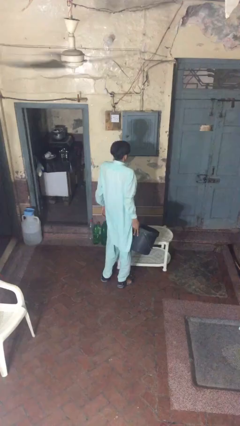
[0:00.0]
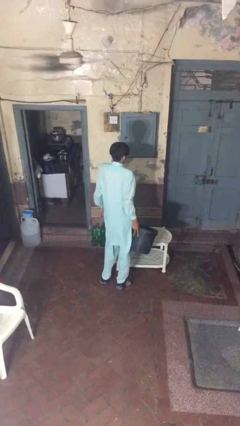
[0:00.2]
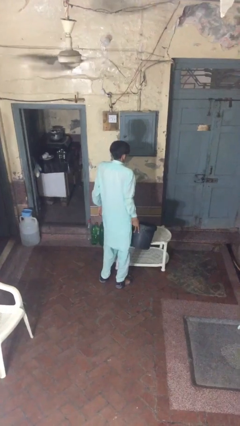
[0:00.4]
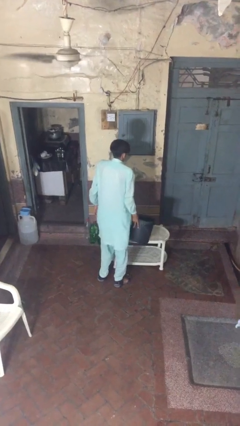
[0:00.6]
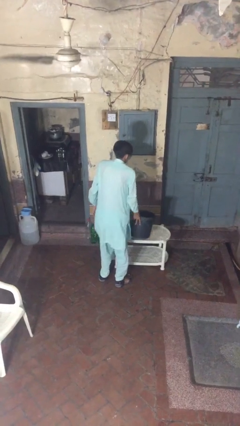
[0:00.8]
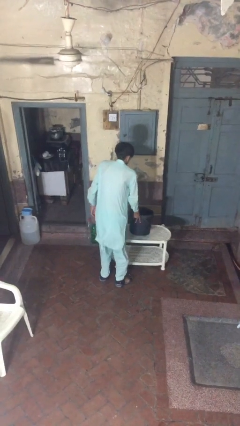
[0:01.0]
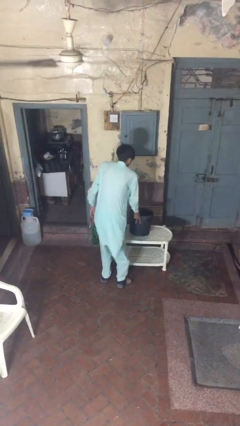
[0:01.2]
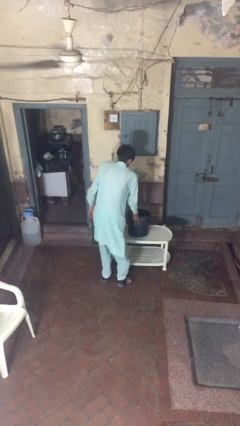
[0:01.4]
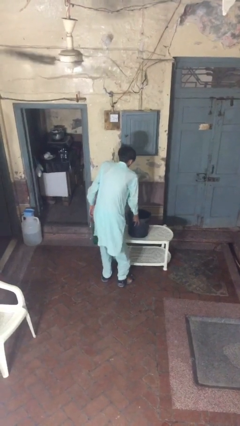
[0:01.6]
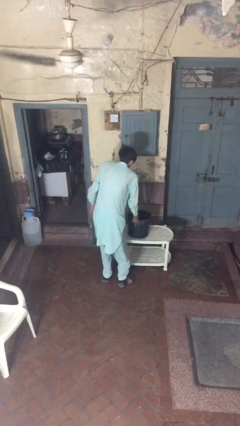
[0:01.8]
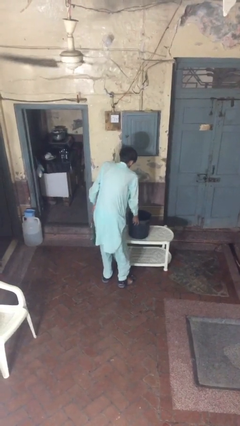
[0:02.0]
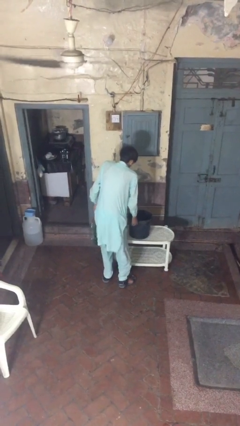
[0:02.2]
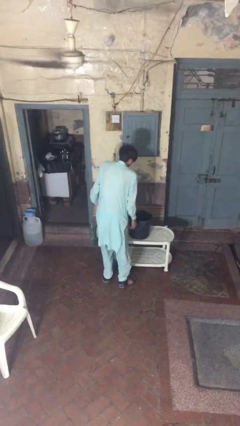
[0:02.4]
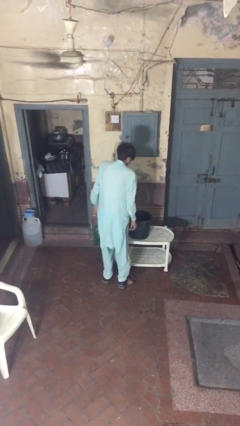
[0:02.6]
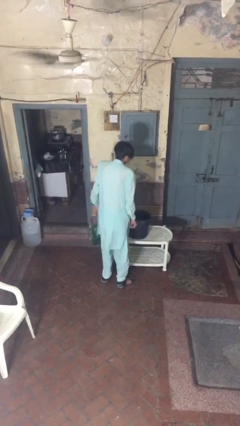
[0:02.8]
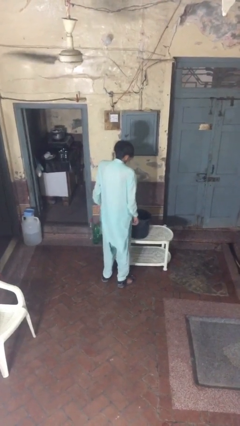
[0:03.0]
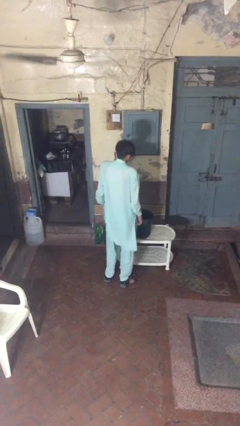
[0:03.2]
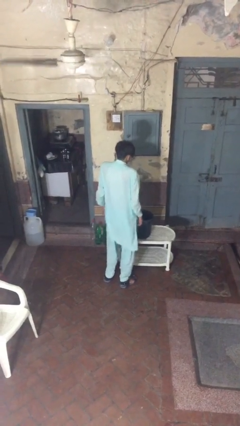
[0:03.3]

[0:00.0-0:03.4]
person puts down object on table

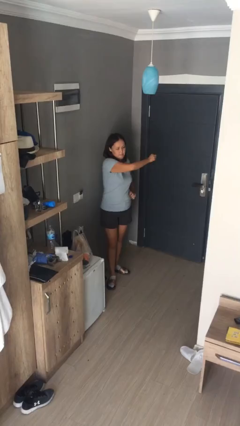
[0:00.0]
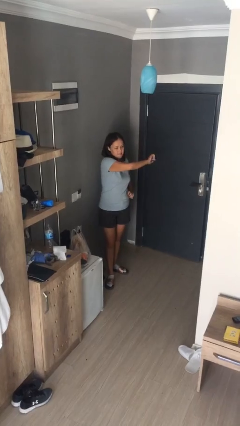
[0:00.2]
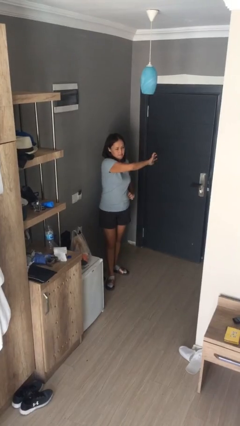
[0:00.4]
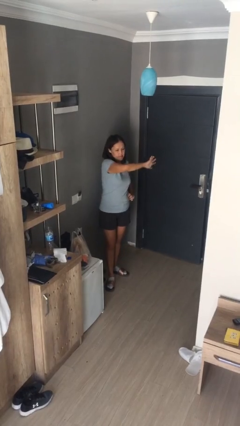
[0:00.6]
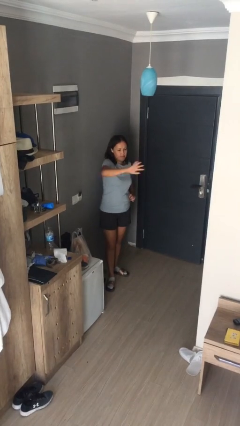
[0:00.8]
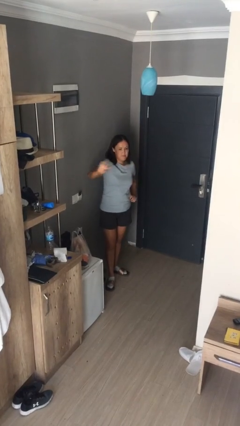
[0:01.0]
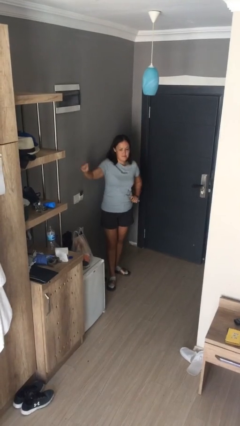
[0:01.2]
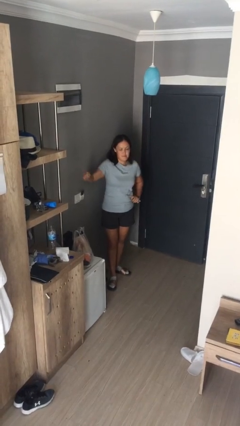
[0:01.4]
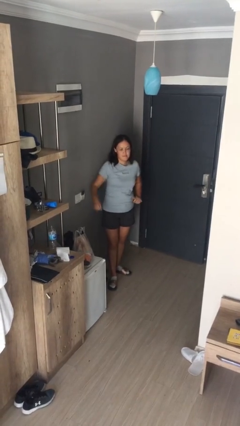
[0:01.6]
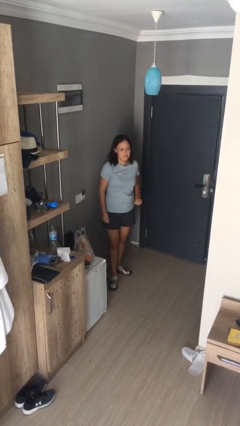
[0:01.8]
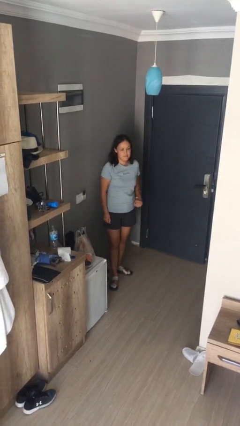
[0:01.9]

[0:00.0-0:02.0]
person gestures swipe right

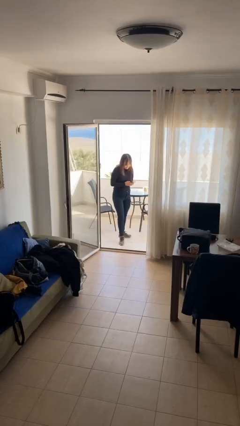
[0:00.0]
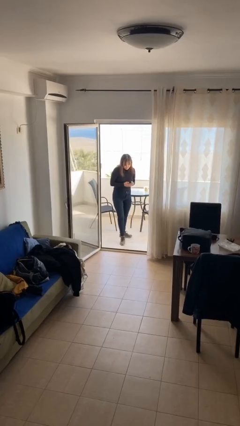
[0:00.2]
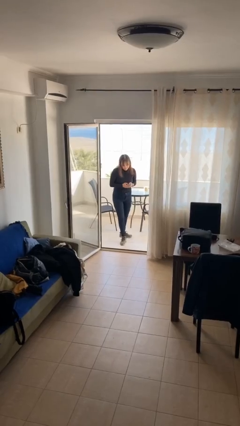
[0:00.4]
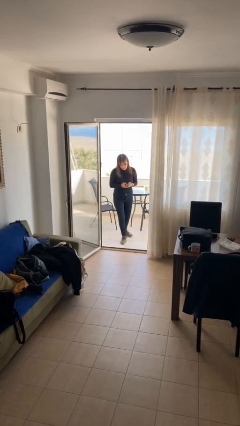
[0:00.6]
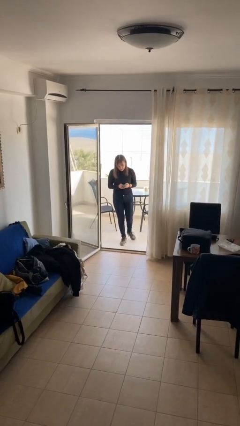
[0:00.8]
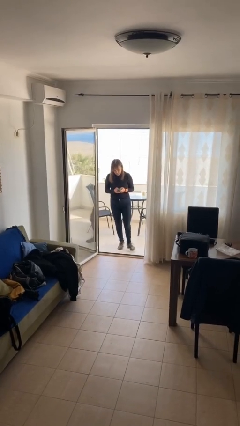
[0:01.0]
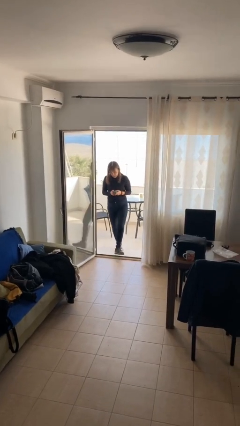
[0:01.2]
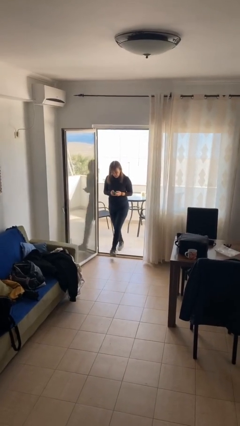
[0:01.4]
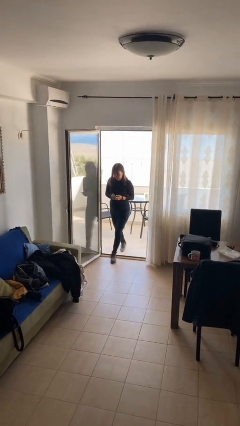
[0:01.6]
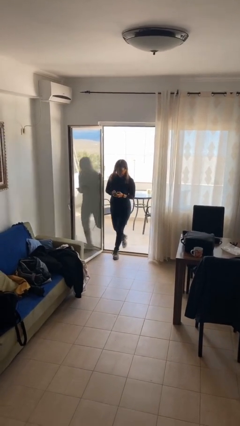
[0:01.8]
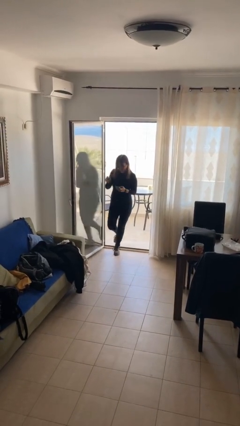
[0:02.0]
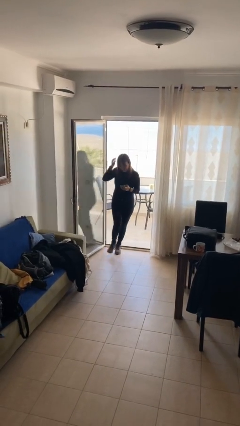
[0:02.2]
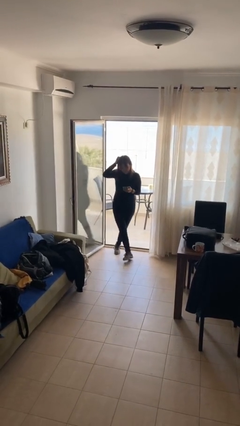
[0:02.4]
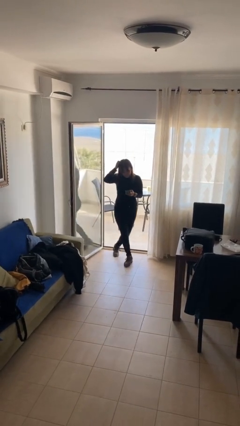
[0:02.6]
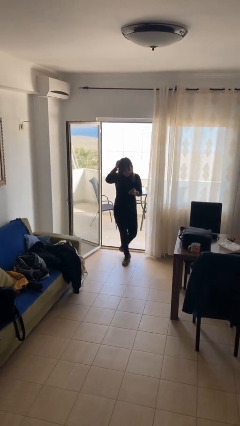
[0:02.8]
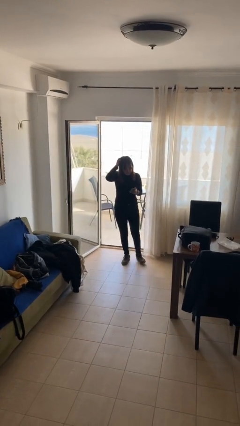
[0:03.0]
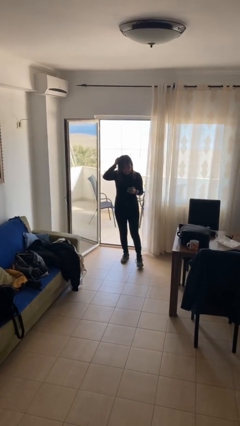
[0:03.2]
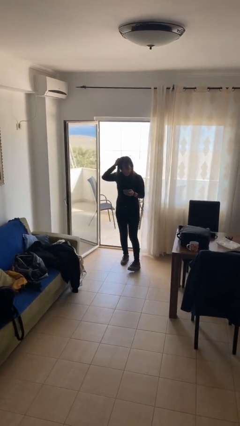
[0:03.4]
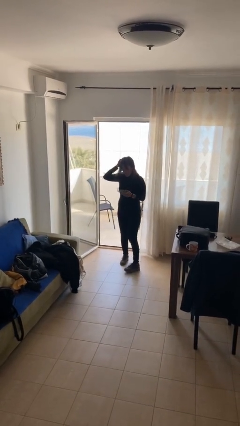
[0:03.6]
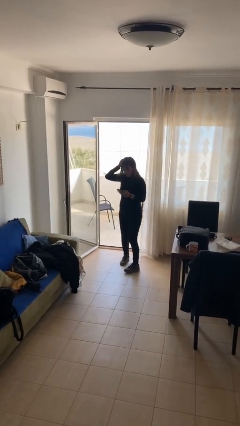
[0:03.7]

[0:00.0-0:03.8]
person enters scene through structure

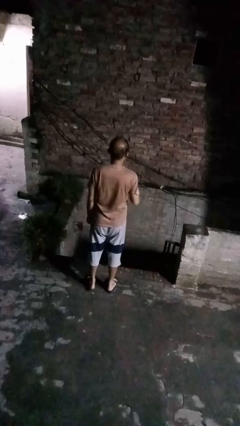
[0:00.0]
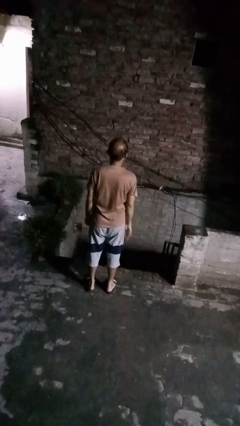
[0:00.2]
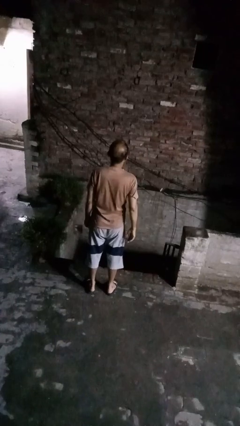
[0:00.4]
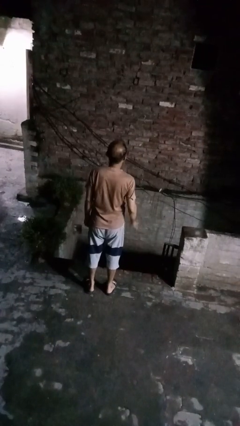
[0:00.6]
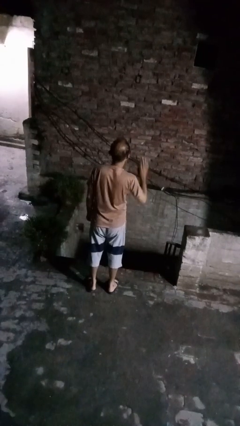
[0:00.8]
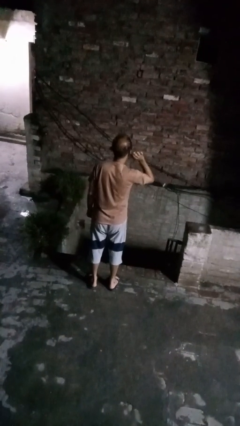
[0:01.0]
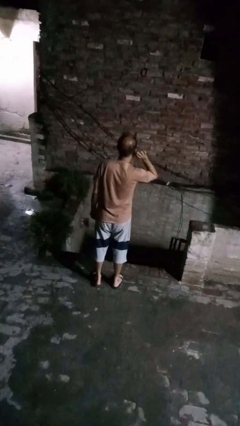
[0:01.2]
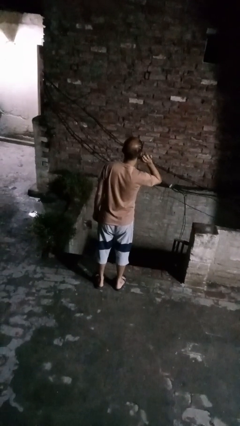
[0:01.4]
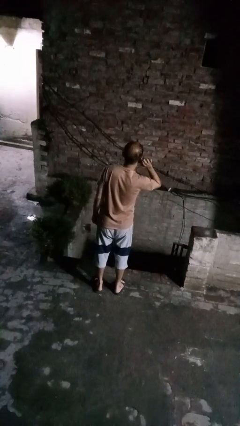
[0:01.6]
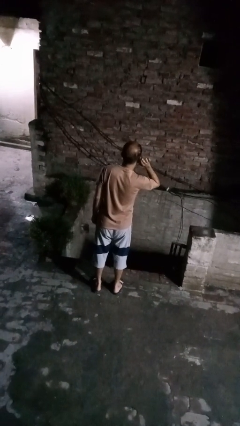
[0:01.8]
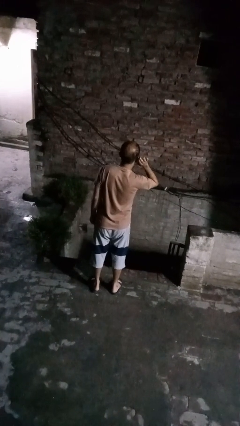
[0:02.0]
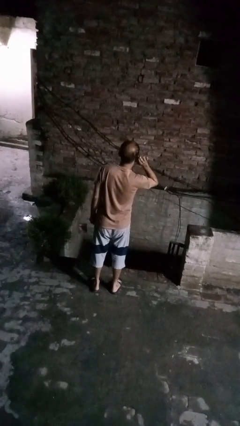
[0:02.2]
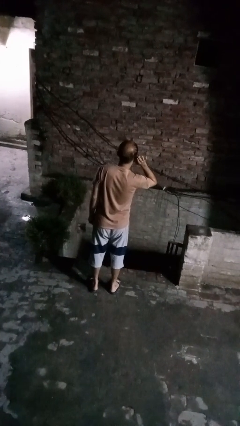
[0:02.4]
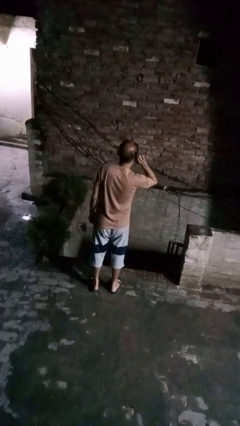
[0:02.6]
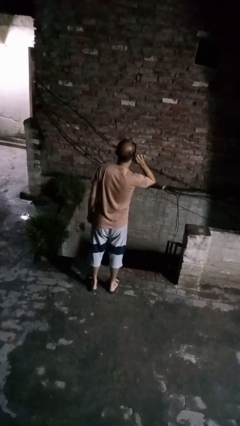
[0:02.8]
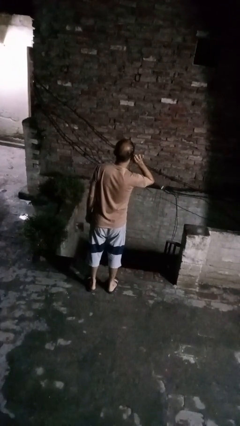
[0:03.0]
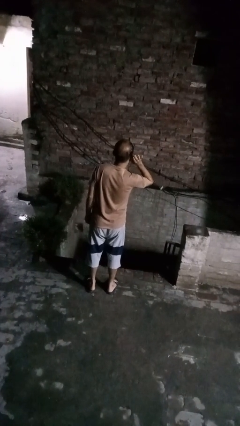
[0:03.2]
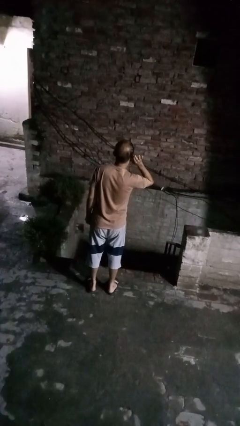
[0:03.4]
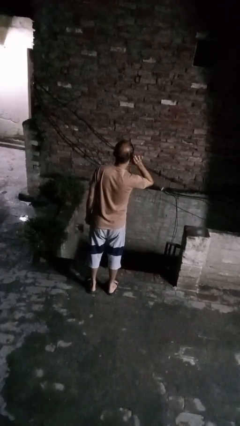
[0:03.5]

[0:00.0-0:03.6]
person gestures listen closely

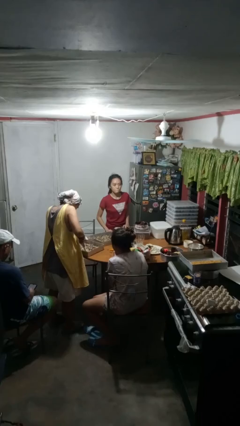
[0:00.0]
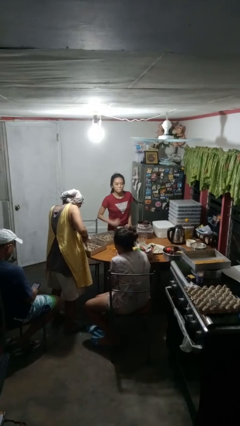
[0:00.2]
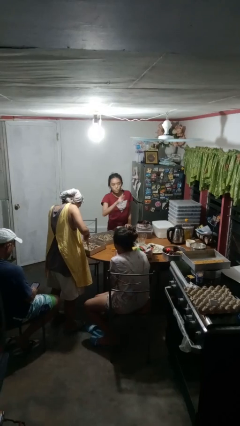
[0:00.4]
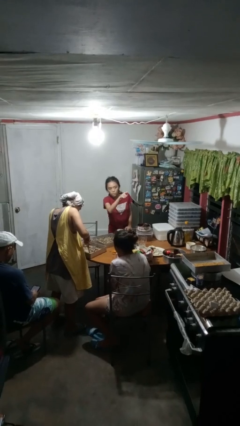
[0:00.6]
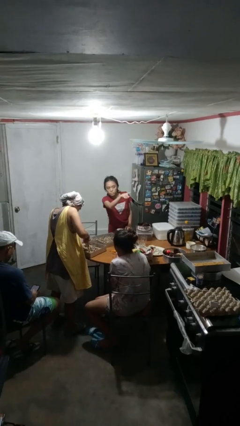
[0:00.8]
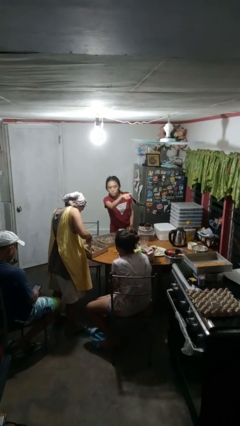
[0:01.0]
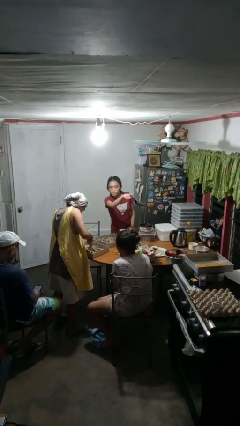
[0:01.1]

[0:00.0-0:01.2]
person points at person

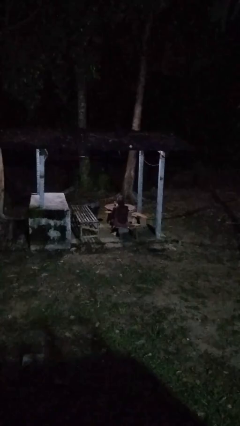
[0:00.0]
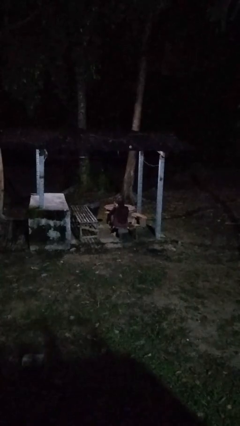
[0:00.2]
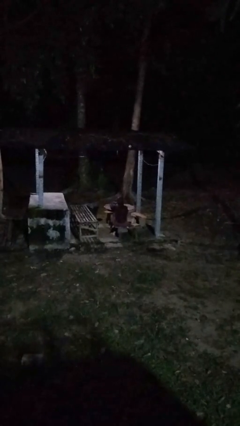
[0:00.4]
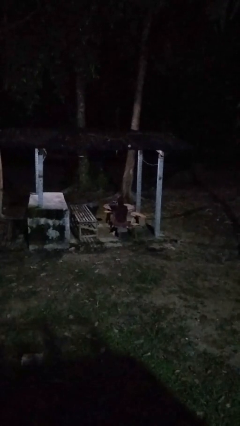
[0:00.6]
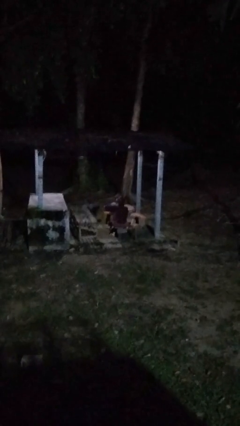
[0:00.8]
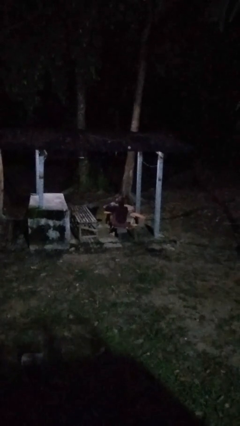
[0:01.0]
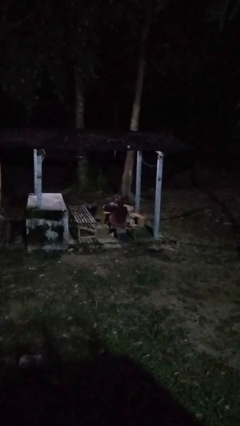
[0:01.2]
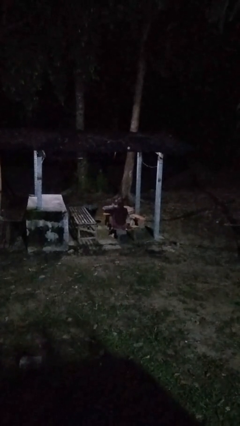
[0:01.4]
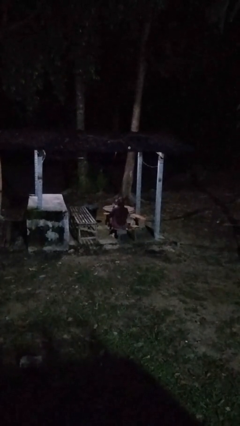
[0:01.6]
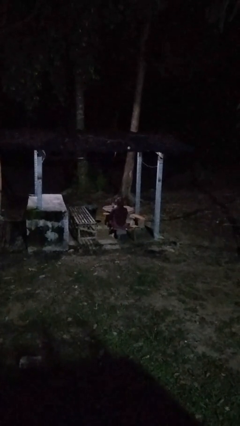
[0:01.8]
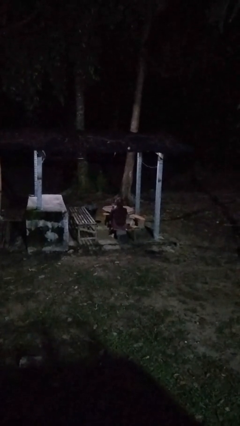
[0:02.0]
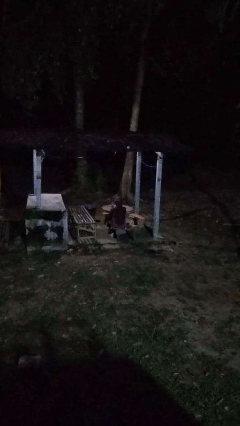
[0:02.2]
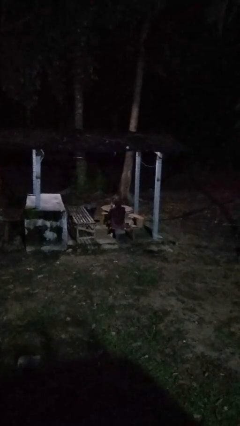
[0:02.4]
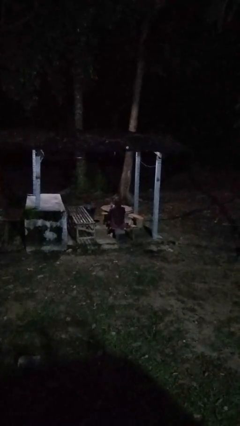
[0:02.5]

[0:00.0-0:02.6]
person gestures cut

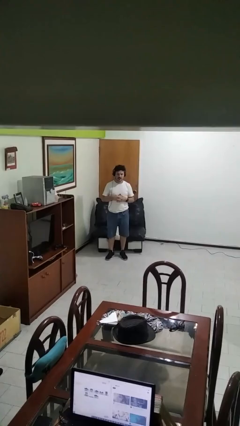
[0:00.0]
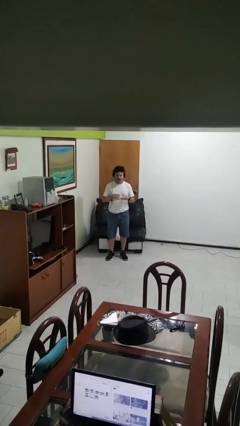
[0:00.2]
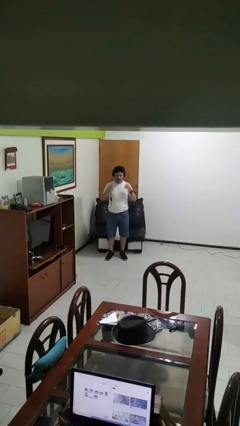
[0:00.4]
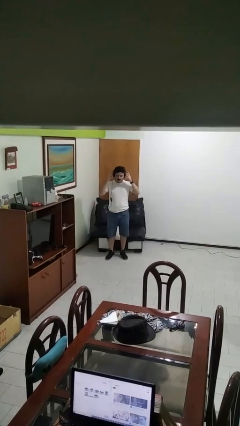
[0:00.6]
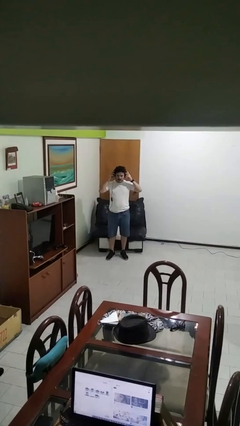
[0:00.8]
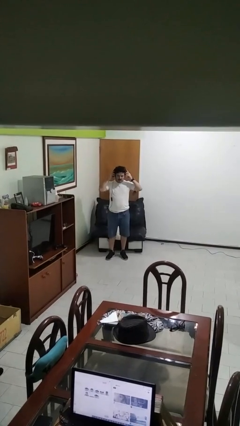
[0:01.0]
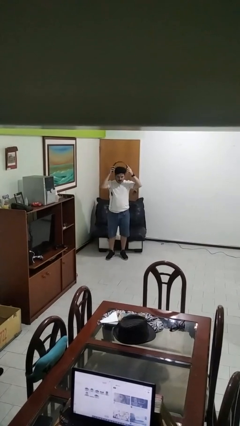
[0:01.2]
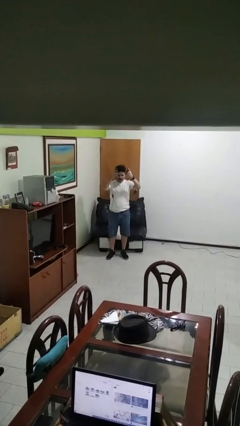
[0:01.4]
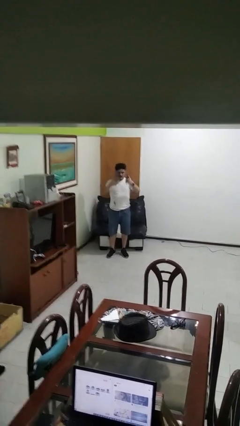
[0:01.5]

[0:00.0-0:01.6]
person takes off headphones
